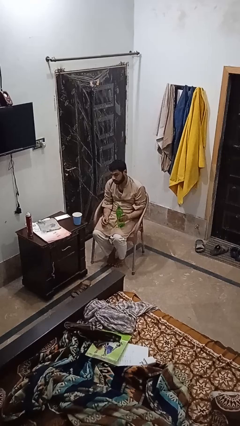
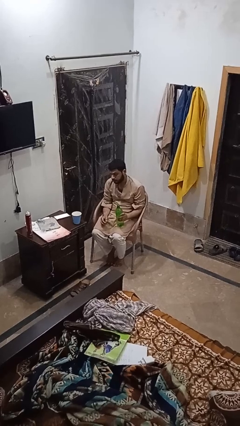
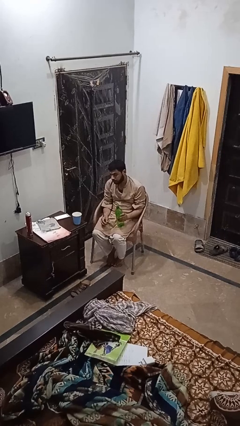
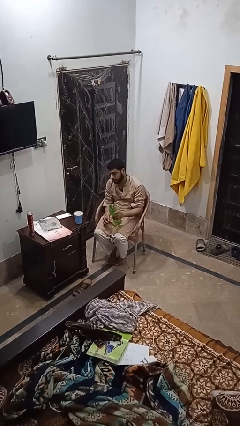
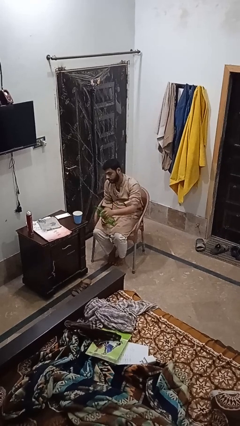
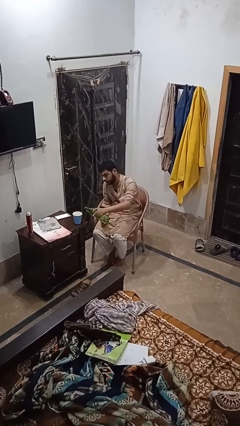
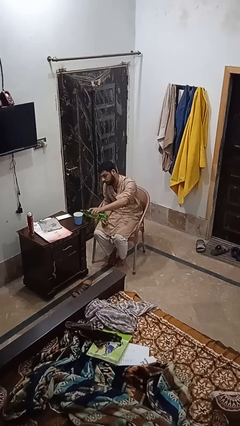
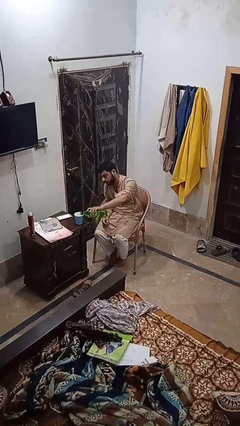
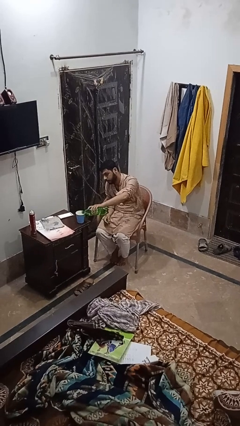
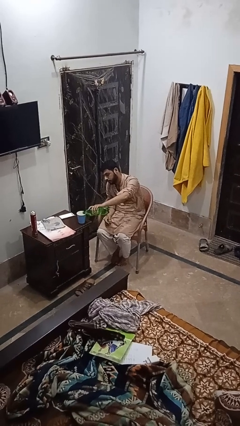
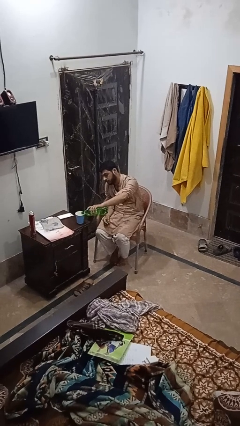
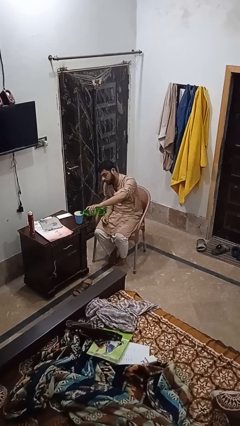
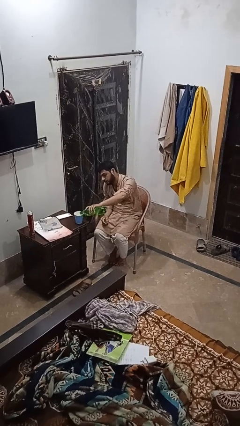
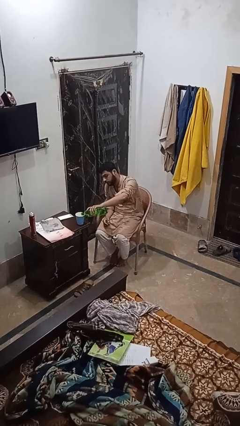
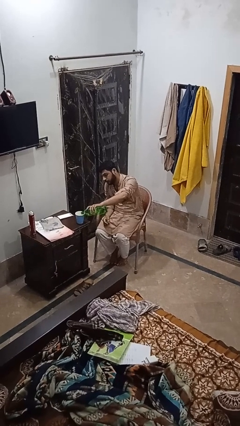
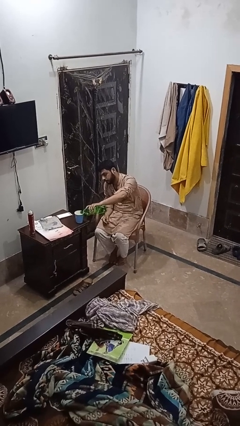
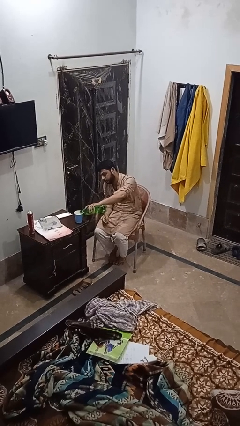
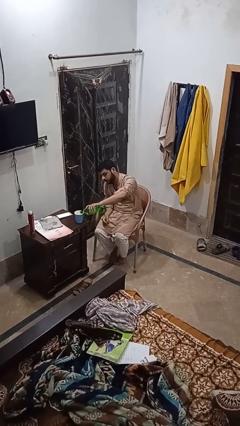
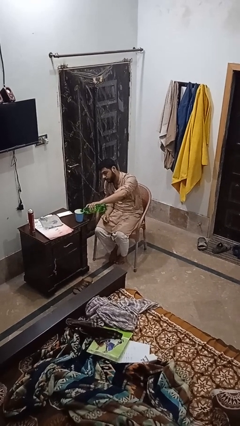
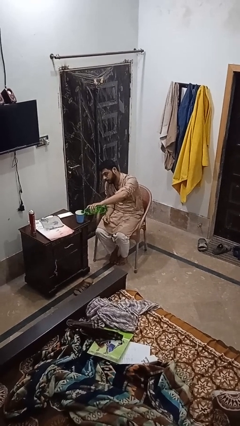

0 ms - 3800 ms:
person pours liquid into cup

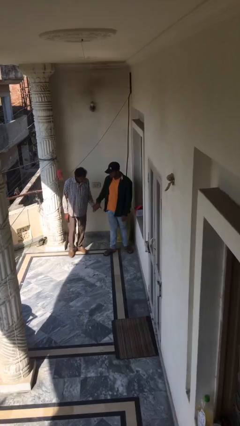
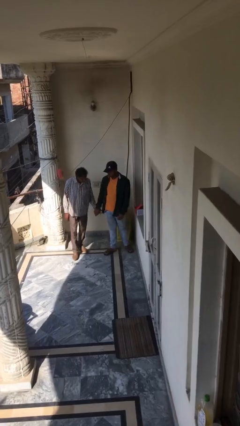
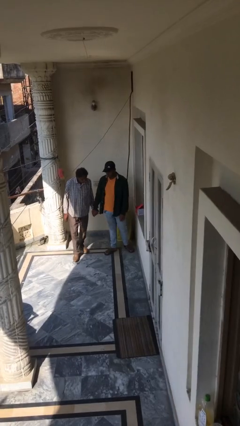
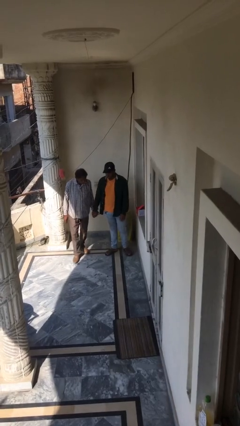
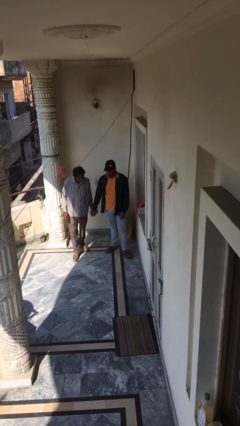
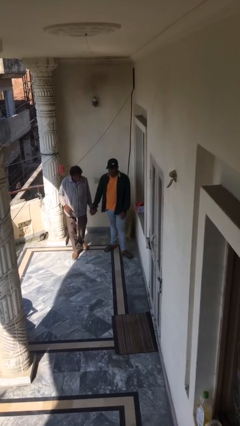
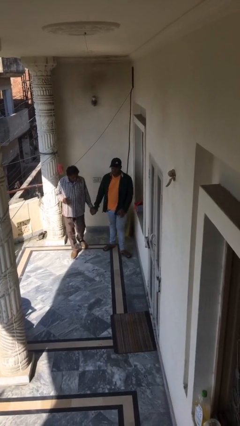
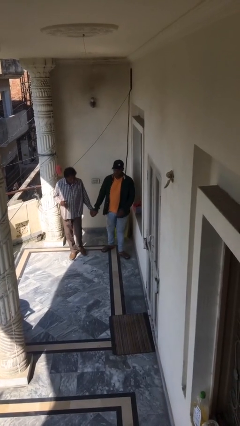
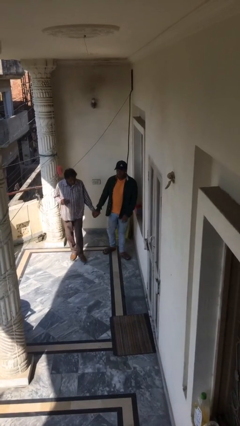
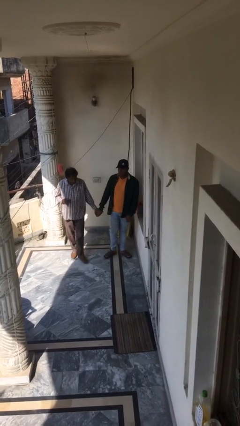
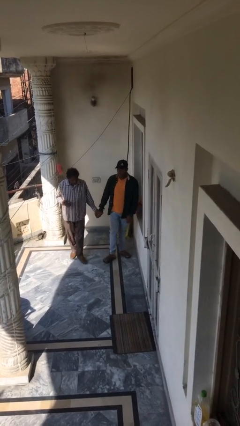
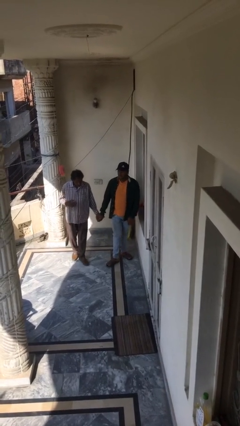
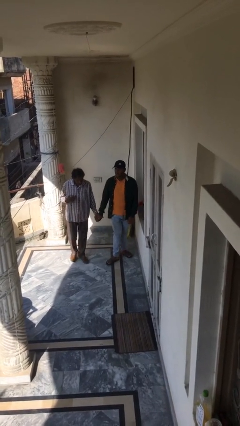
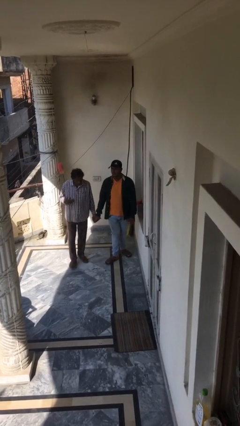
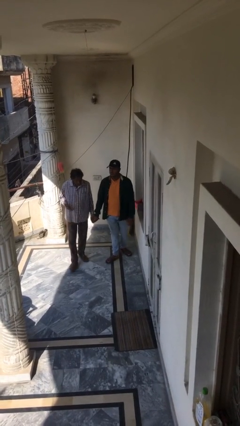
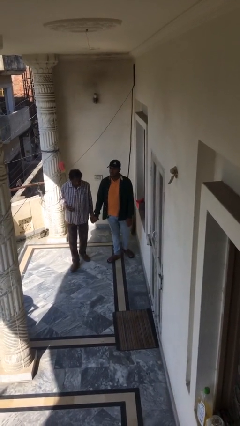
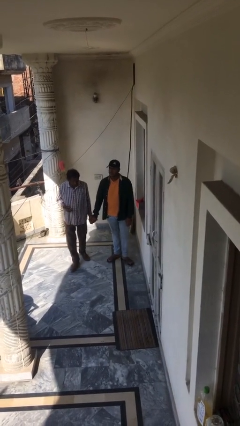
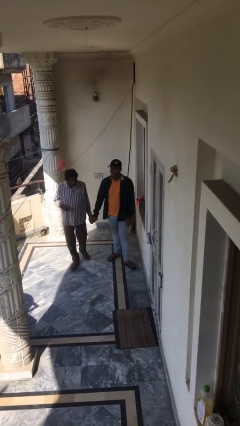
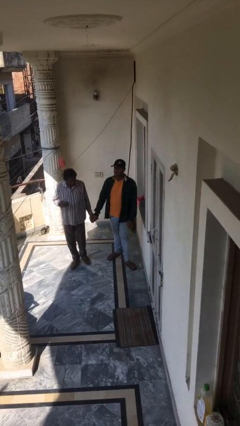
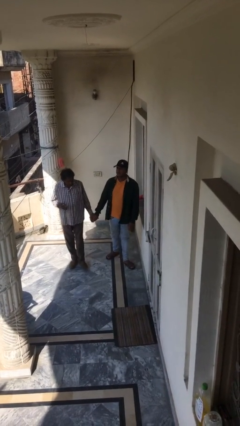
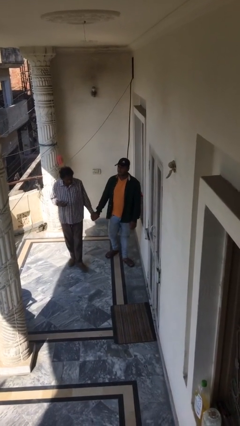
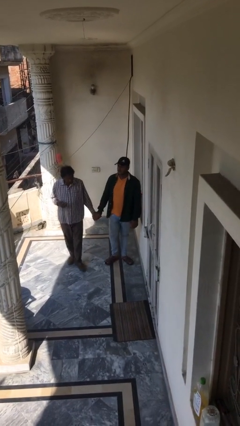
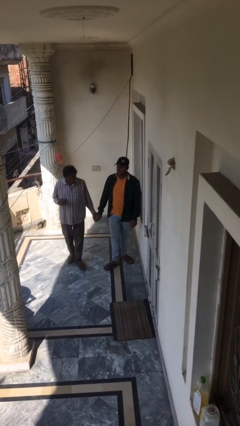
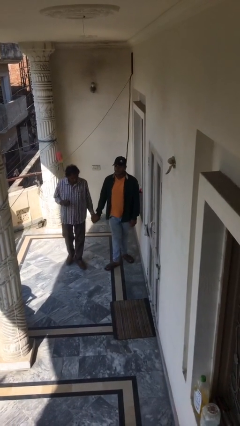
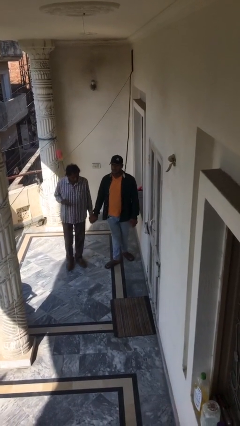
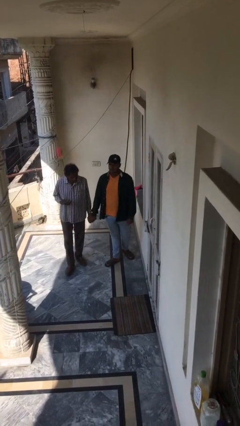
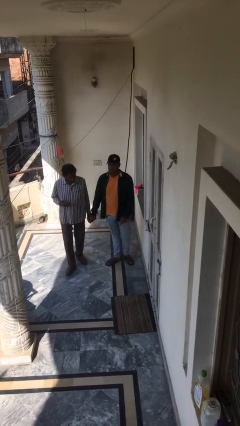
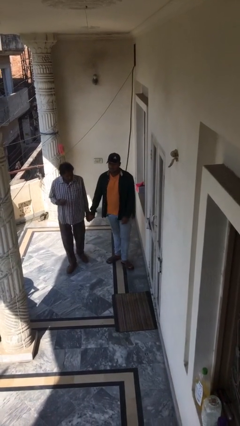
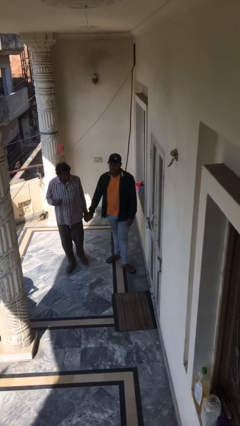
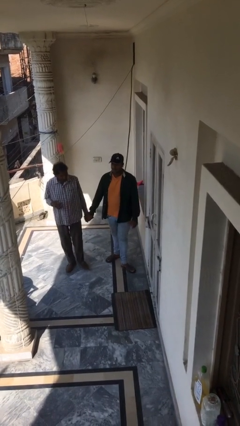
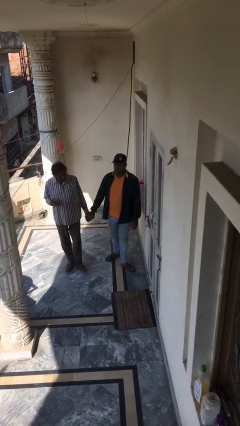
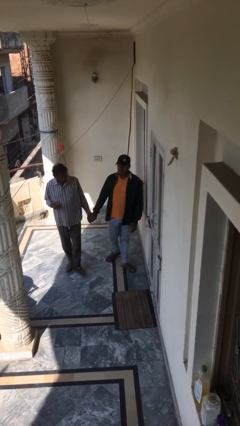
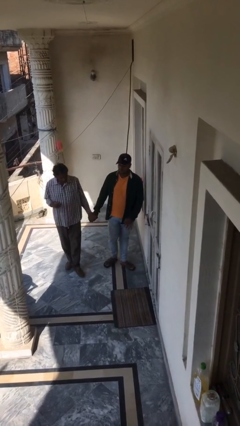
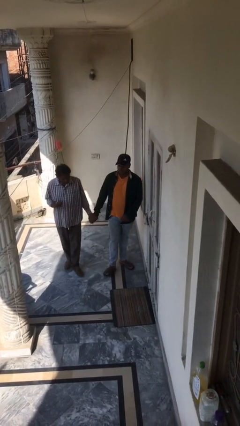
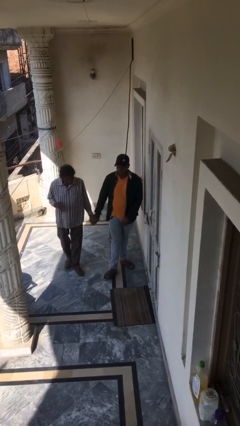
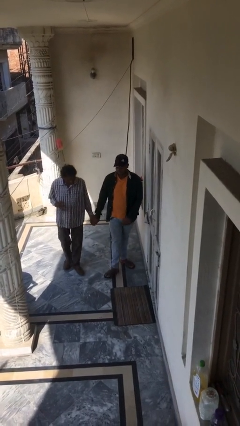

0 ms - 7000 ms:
person holds hand

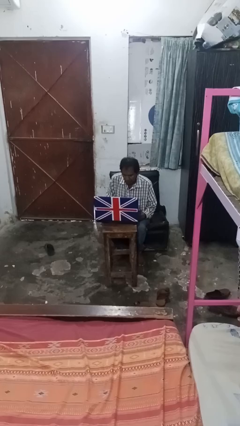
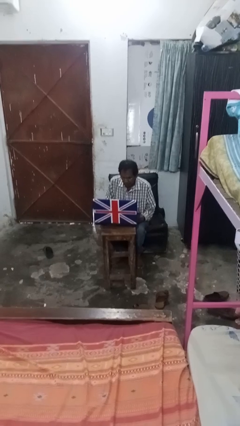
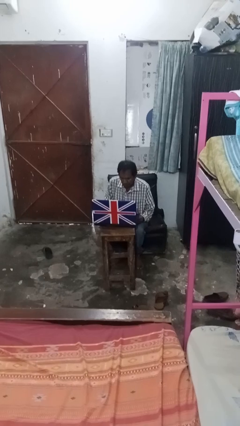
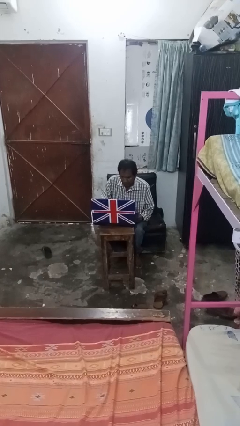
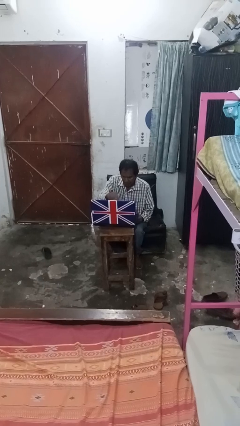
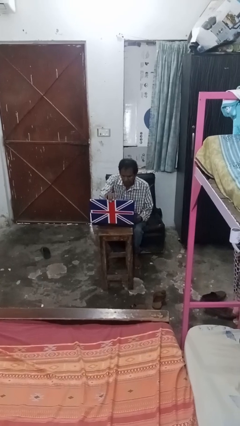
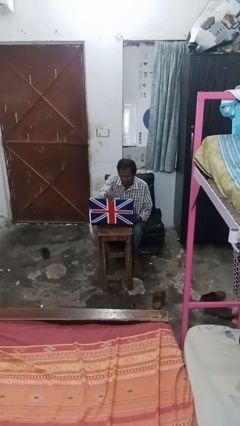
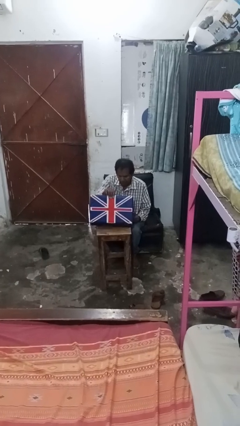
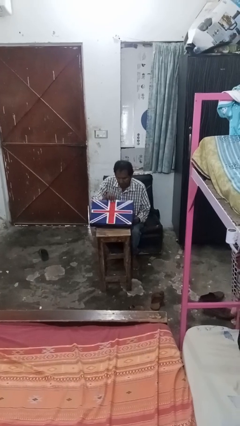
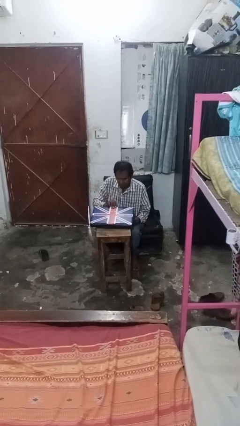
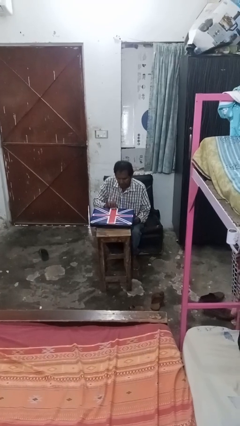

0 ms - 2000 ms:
person closes laptop

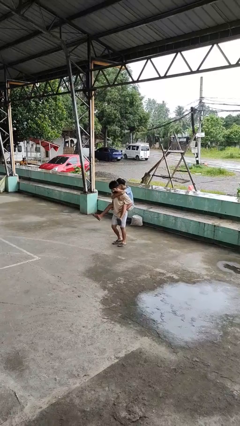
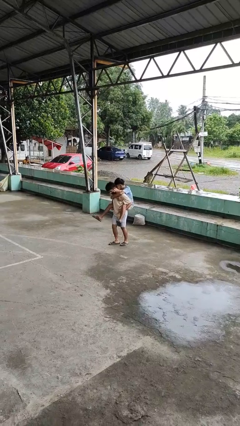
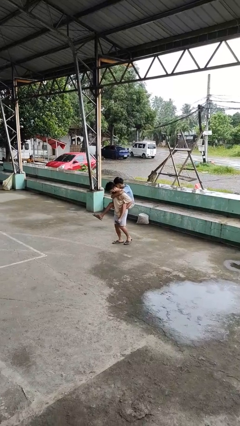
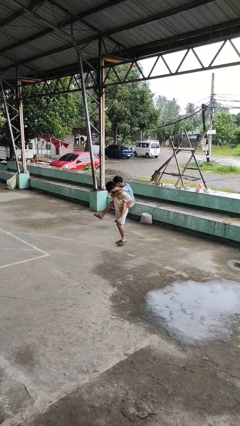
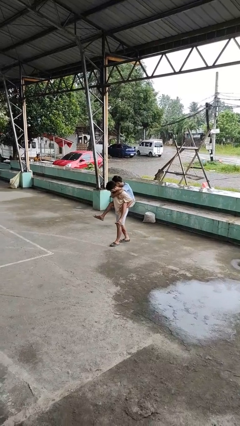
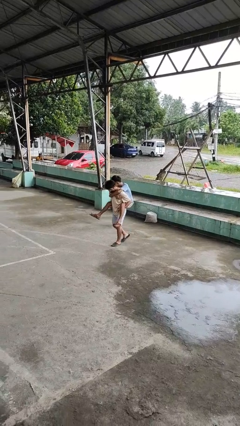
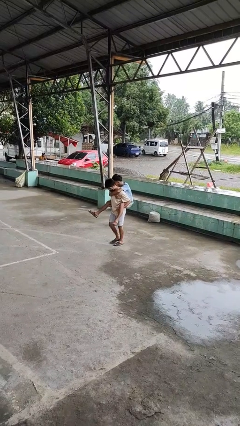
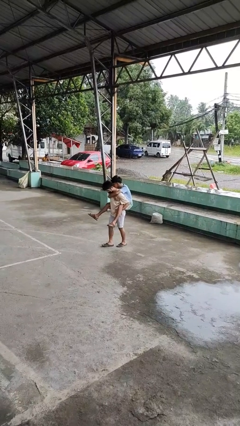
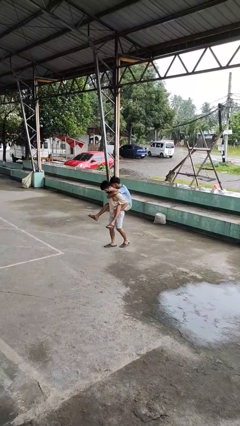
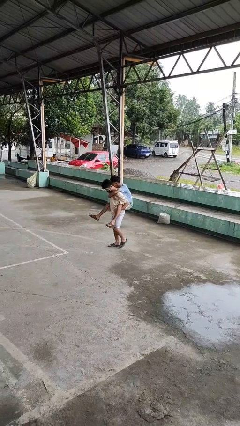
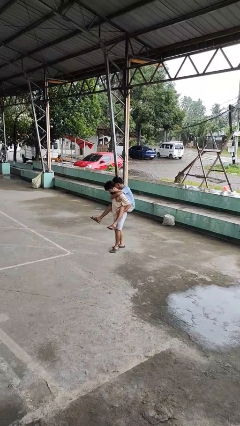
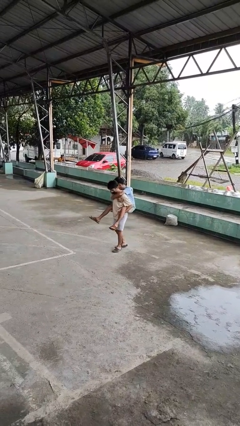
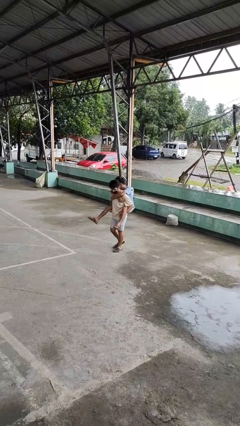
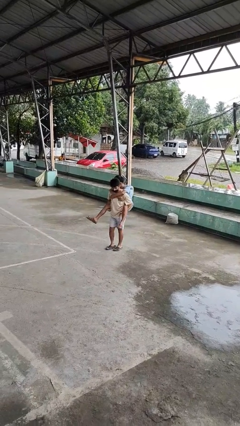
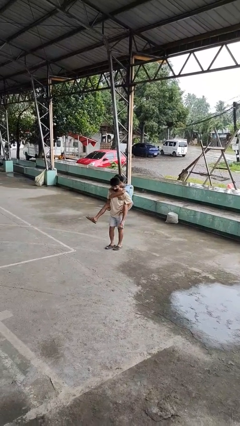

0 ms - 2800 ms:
person carries person on back

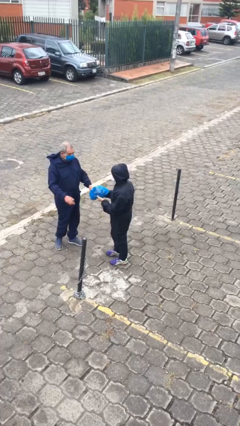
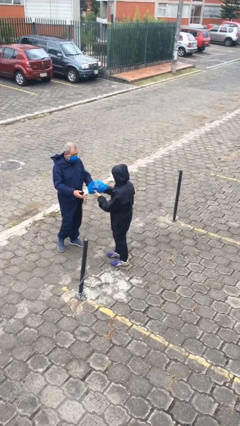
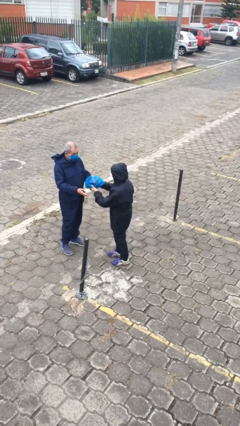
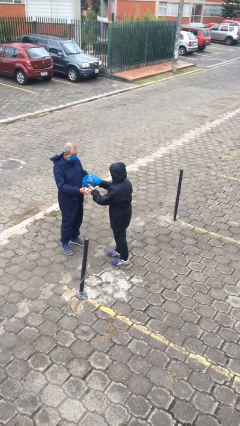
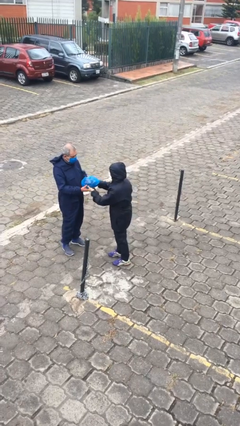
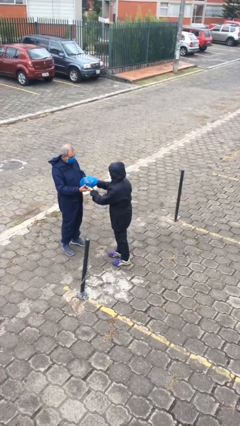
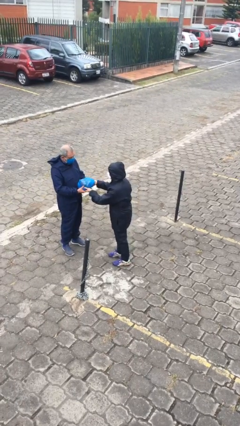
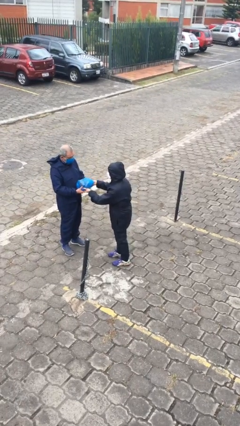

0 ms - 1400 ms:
person transfers object to person

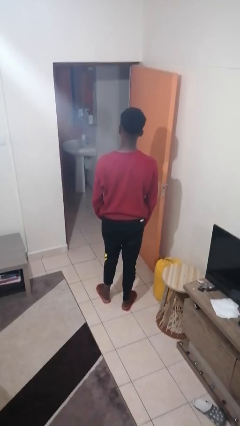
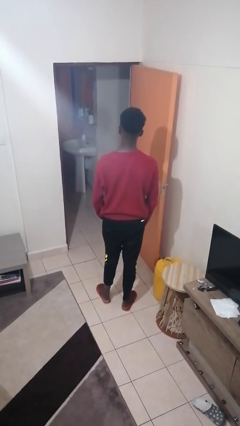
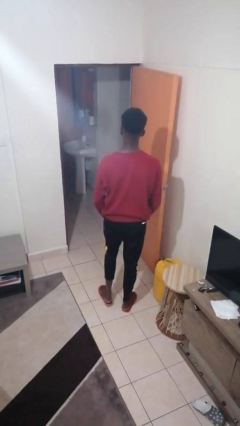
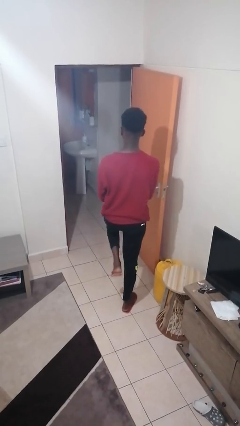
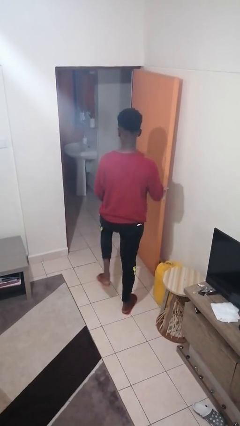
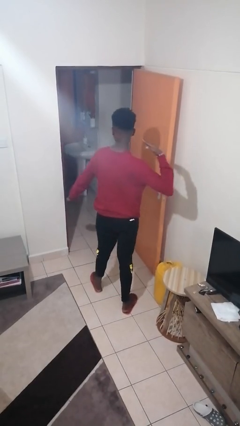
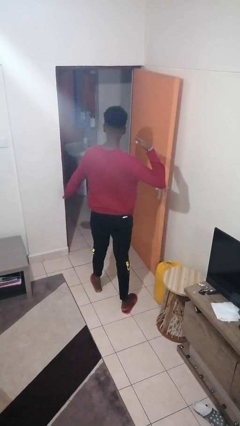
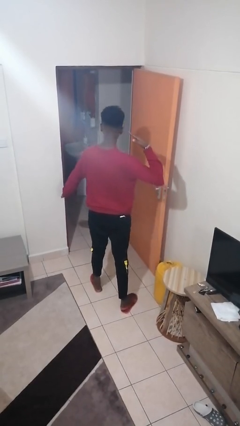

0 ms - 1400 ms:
person karate chop
